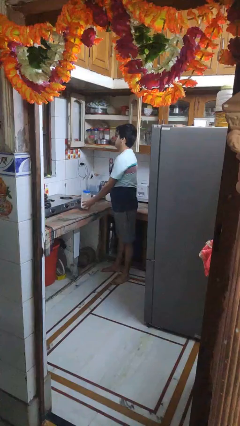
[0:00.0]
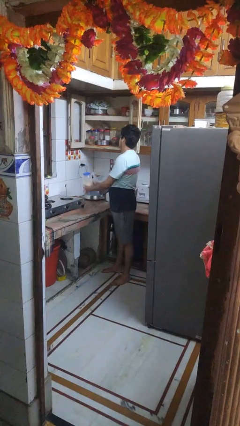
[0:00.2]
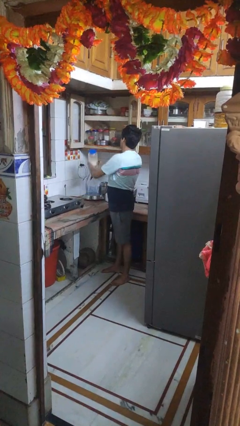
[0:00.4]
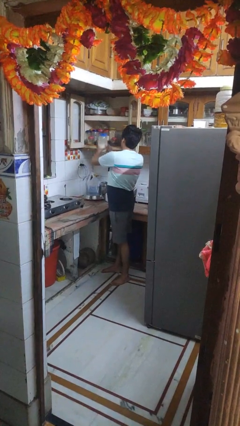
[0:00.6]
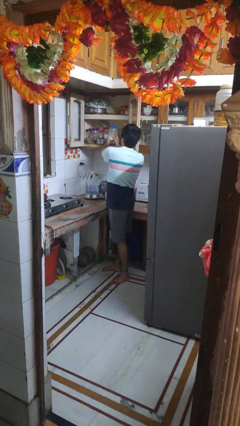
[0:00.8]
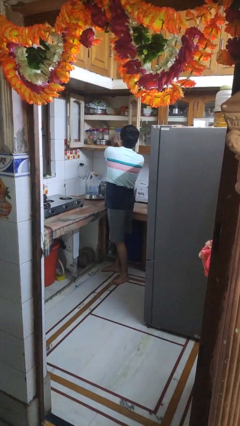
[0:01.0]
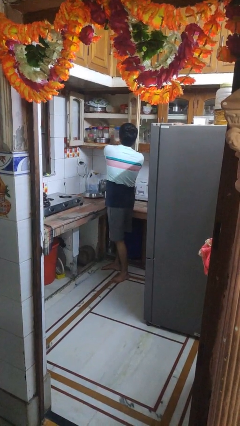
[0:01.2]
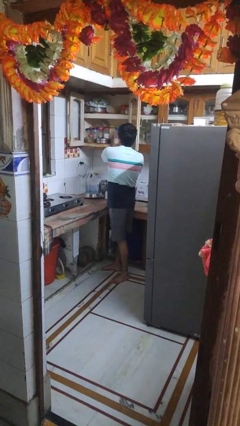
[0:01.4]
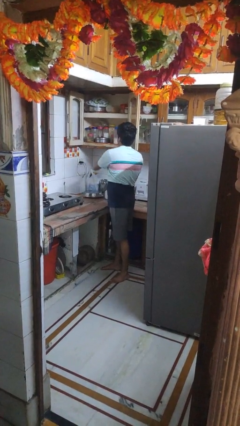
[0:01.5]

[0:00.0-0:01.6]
person puts object in cabinet

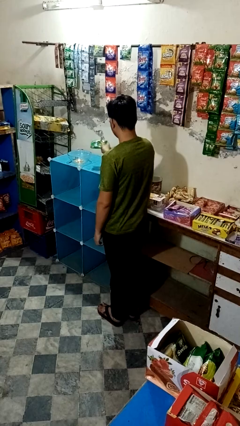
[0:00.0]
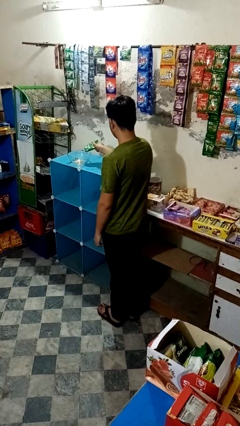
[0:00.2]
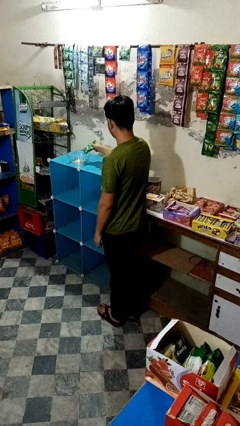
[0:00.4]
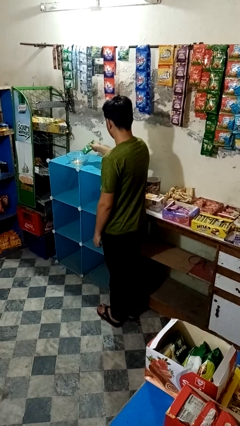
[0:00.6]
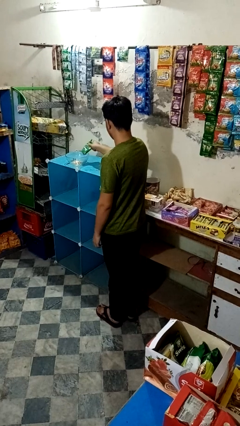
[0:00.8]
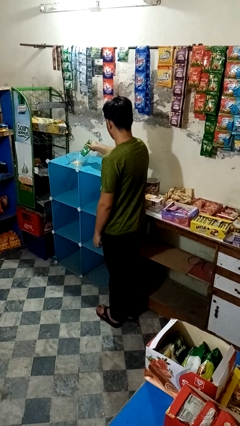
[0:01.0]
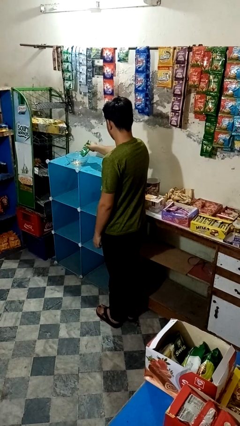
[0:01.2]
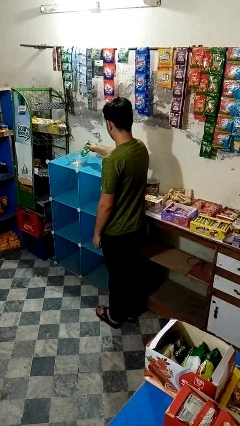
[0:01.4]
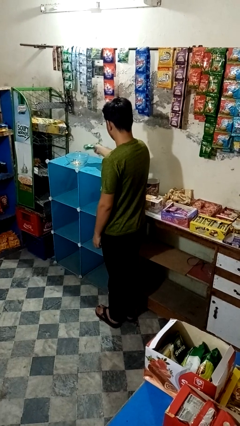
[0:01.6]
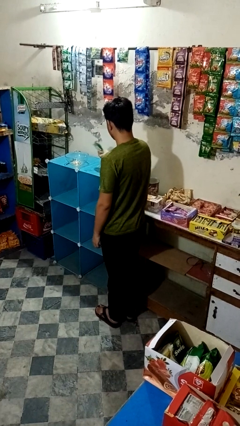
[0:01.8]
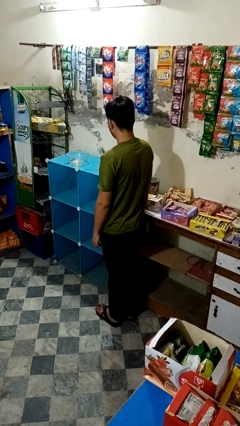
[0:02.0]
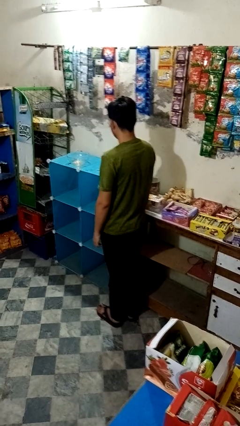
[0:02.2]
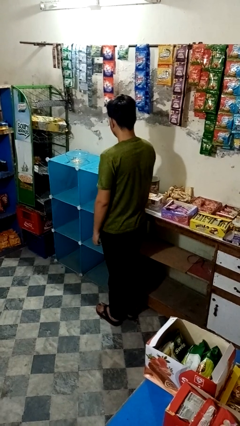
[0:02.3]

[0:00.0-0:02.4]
person pours into bowl

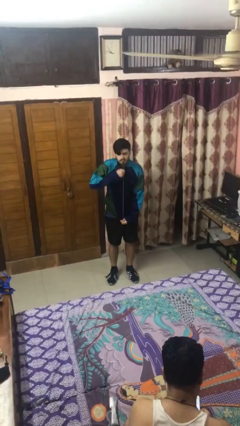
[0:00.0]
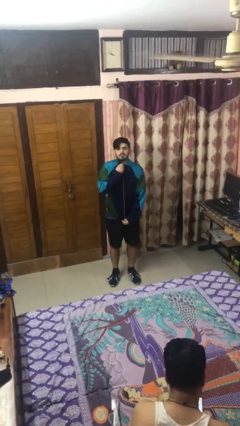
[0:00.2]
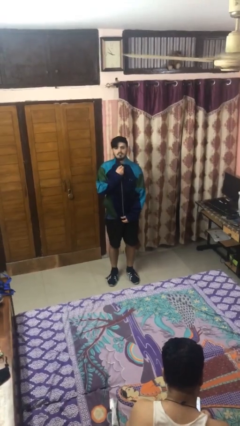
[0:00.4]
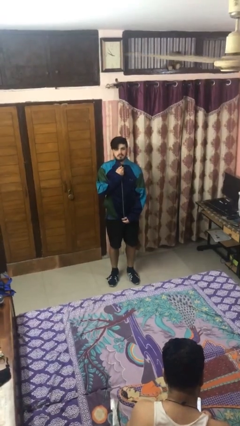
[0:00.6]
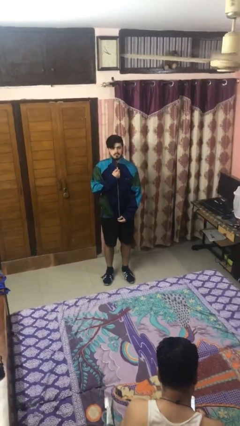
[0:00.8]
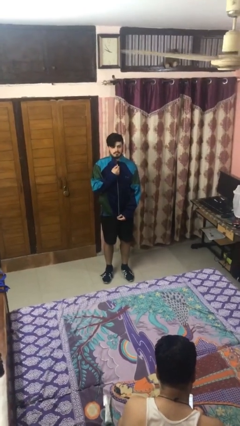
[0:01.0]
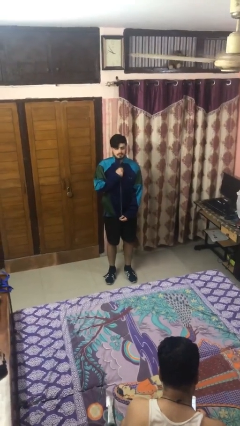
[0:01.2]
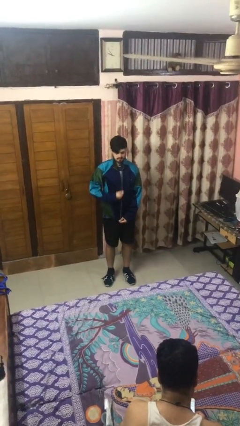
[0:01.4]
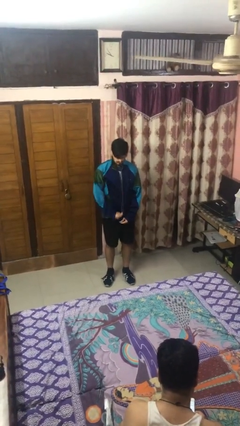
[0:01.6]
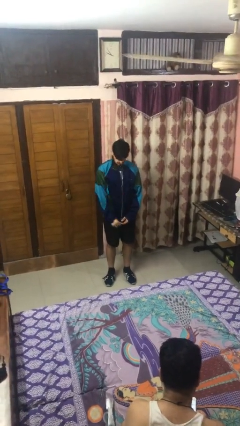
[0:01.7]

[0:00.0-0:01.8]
person unzips jacket

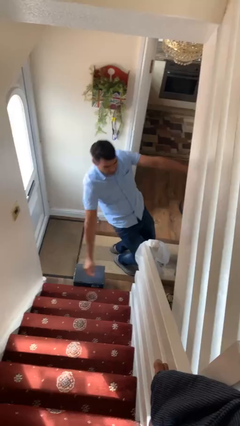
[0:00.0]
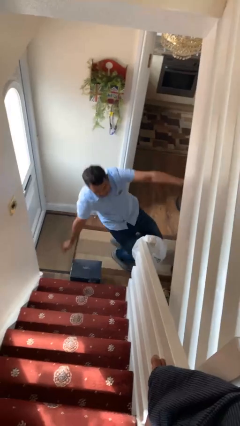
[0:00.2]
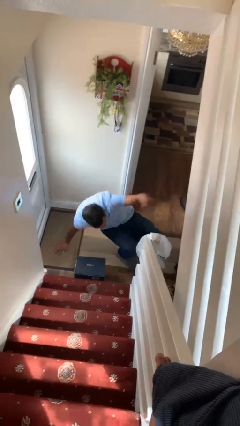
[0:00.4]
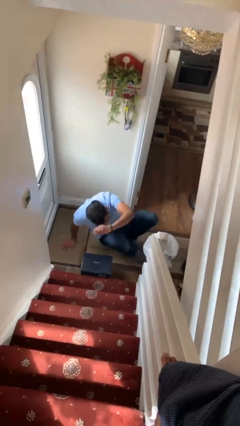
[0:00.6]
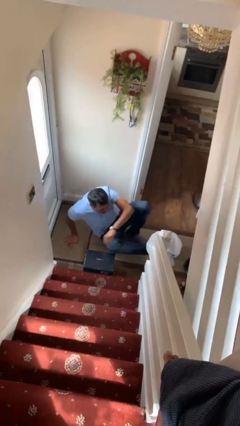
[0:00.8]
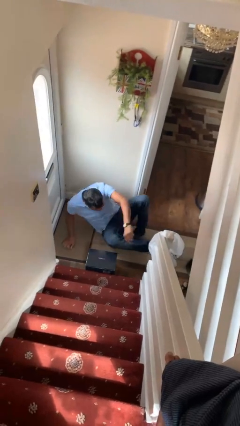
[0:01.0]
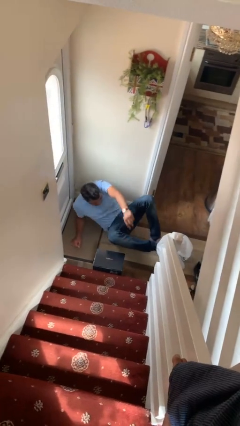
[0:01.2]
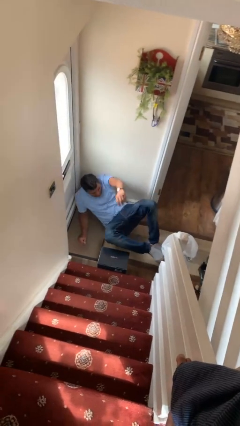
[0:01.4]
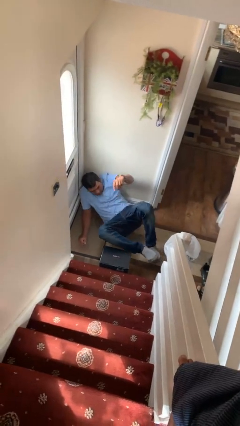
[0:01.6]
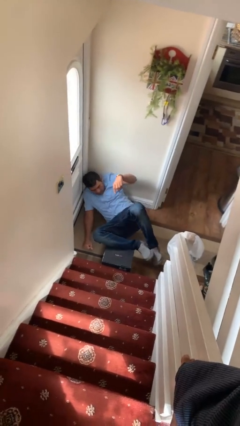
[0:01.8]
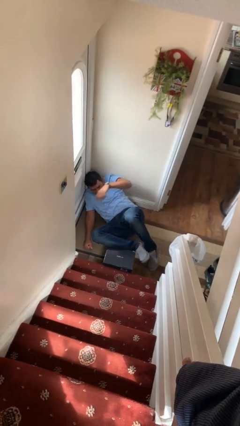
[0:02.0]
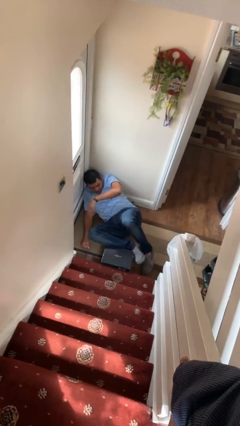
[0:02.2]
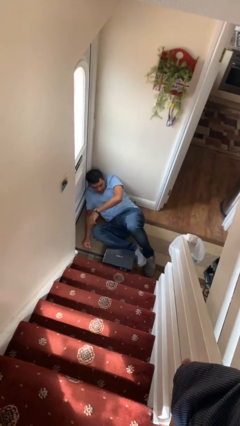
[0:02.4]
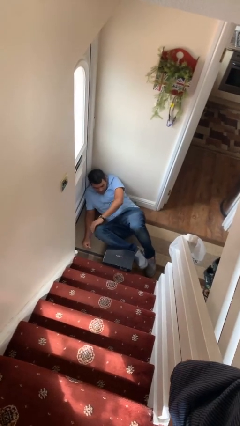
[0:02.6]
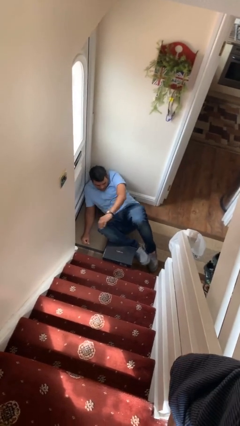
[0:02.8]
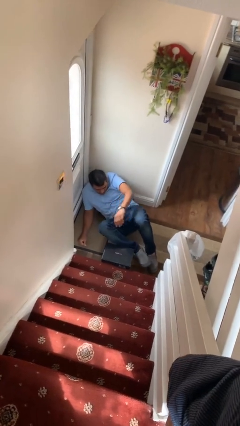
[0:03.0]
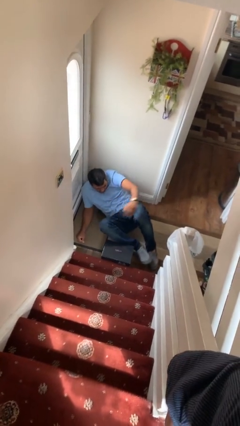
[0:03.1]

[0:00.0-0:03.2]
person lies down on floor

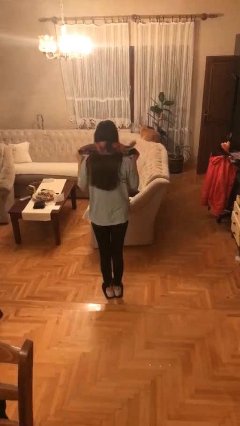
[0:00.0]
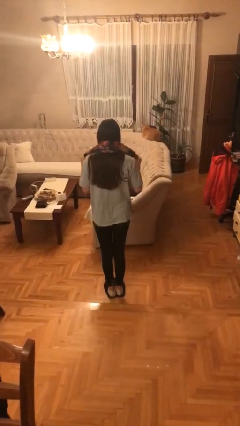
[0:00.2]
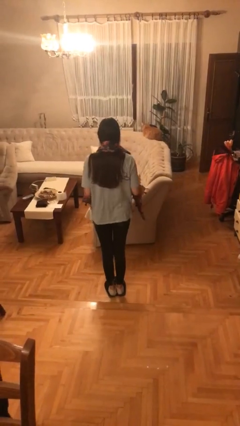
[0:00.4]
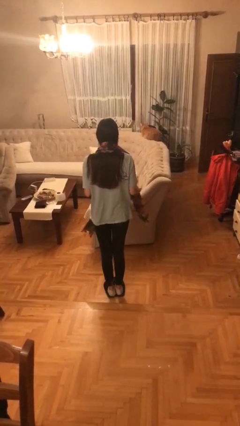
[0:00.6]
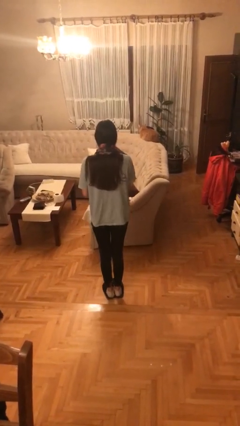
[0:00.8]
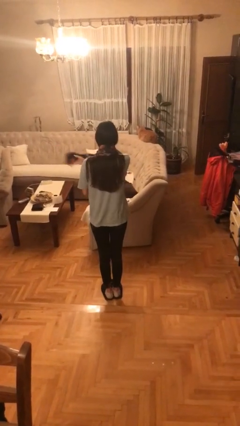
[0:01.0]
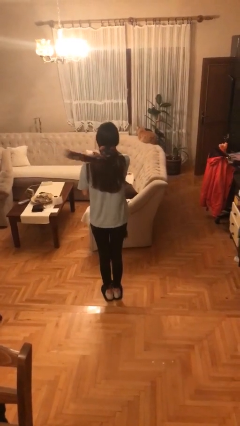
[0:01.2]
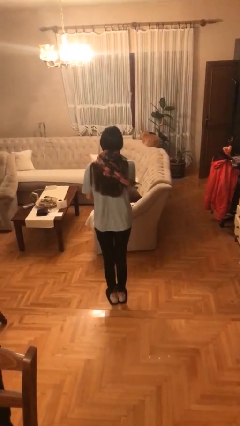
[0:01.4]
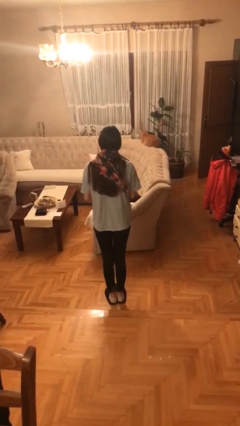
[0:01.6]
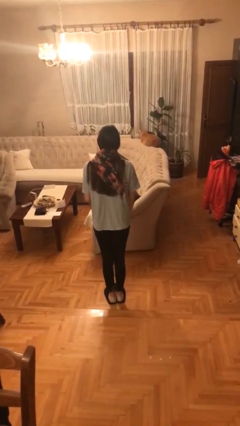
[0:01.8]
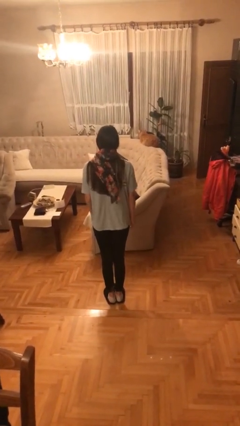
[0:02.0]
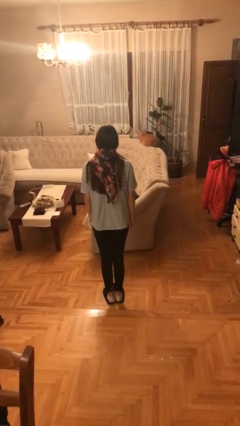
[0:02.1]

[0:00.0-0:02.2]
person puts on scarf

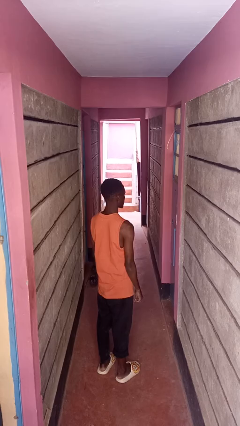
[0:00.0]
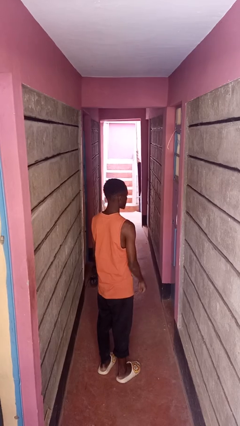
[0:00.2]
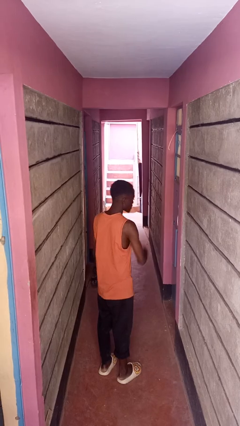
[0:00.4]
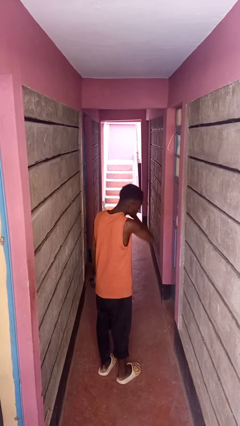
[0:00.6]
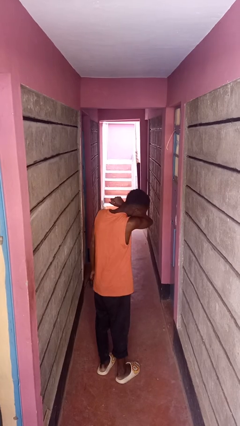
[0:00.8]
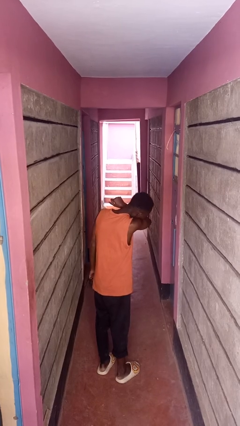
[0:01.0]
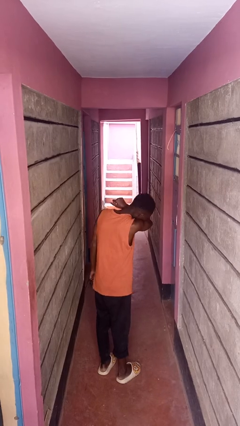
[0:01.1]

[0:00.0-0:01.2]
person sneezes into arm

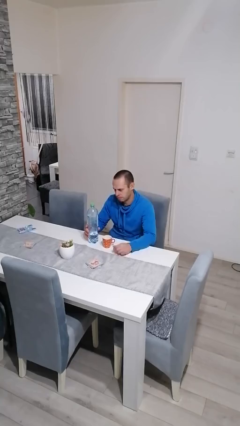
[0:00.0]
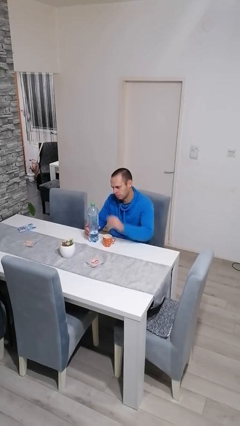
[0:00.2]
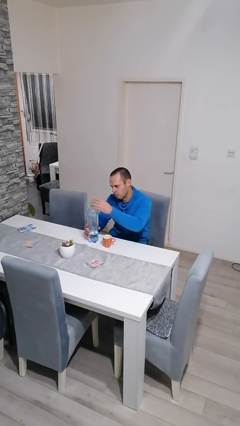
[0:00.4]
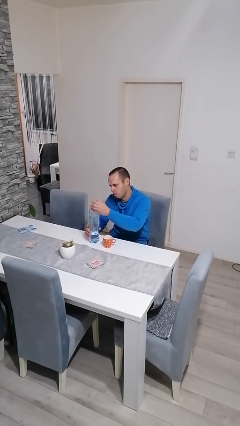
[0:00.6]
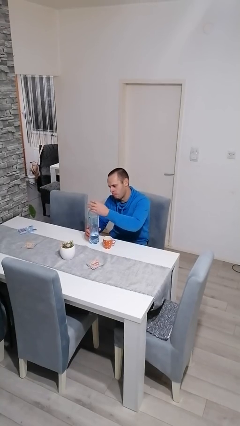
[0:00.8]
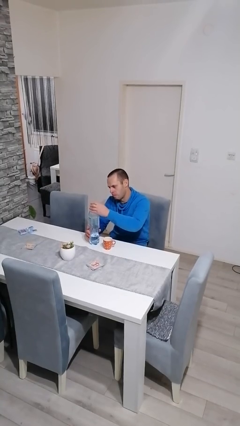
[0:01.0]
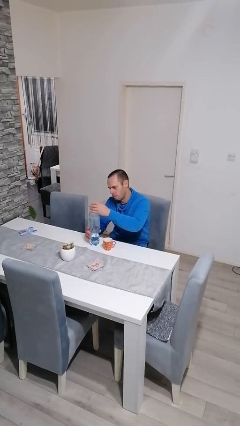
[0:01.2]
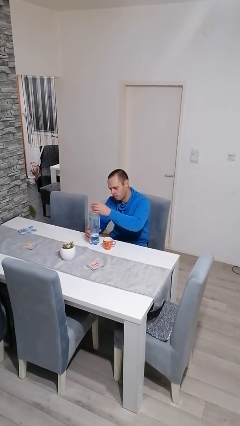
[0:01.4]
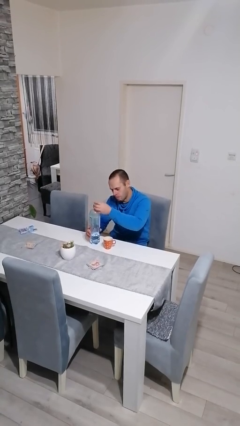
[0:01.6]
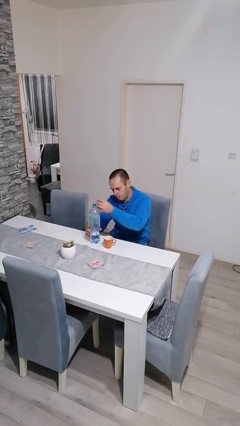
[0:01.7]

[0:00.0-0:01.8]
person unscrews lid from bottle

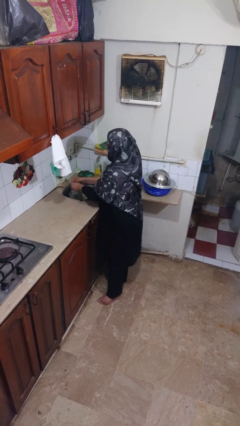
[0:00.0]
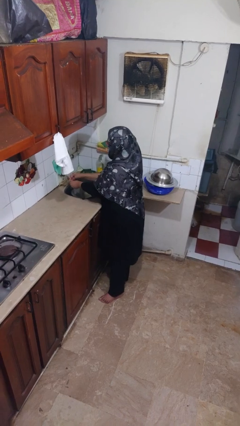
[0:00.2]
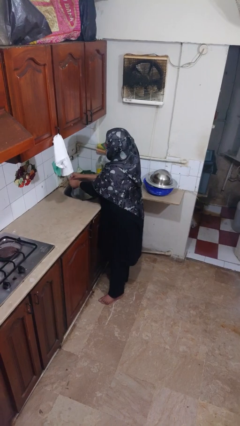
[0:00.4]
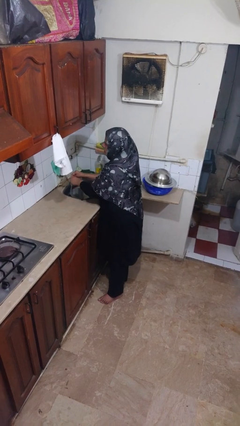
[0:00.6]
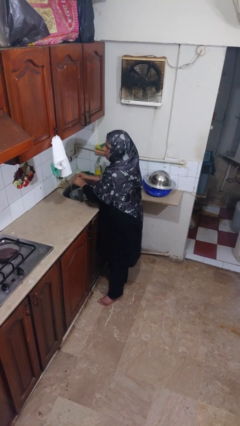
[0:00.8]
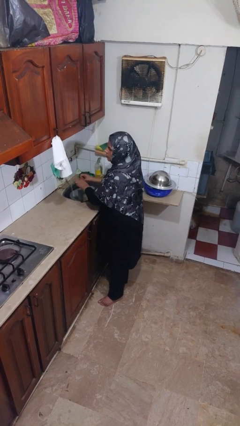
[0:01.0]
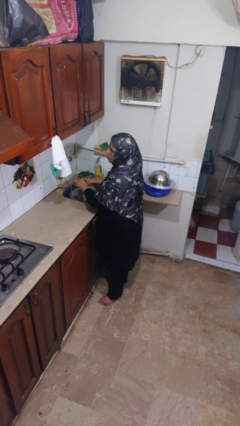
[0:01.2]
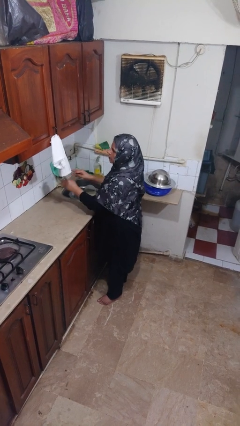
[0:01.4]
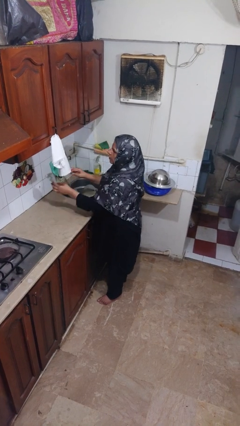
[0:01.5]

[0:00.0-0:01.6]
person washes hands

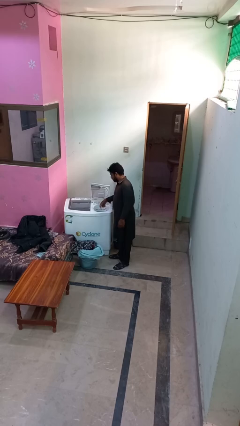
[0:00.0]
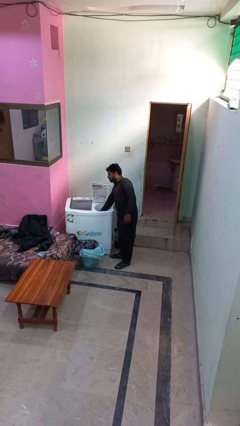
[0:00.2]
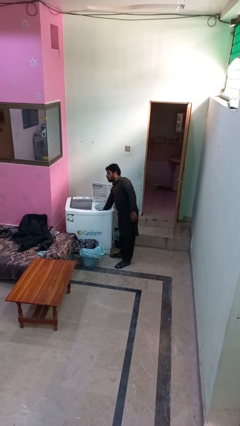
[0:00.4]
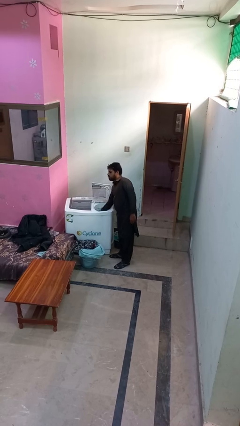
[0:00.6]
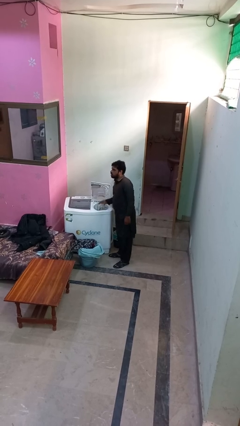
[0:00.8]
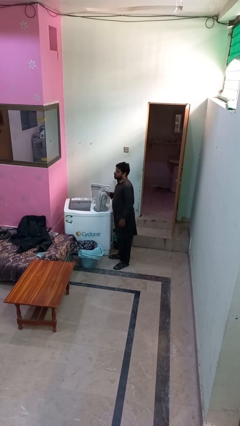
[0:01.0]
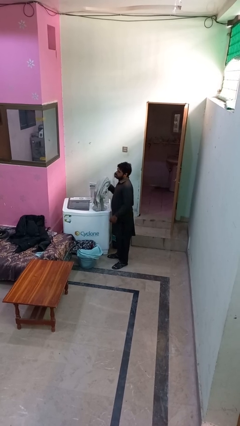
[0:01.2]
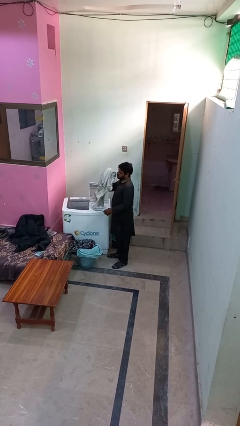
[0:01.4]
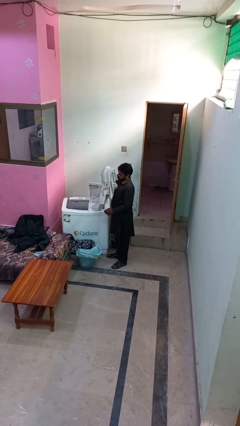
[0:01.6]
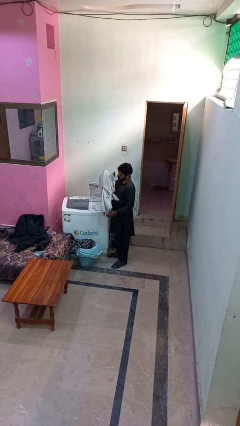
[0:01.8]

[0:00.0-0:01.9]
person unloads dryer
